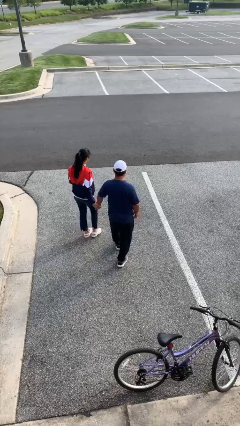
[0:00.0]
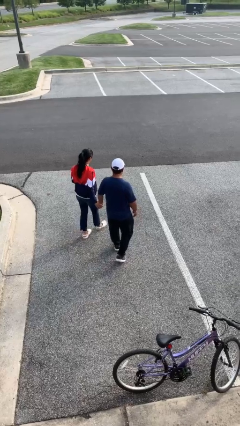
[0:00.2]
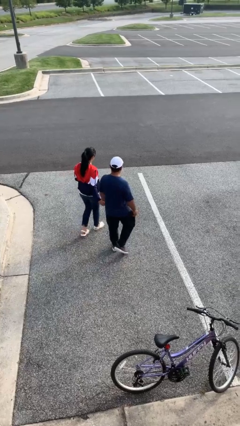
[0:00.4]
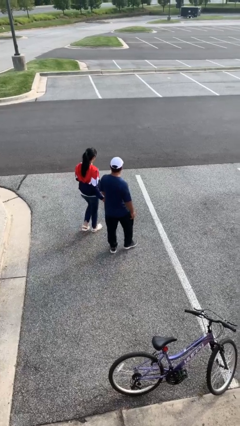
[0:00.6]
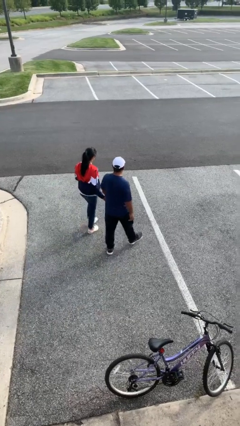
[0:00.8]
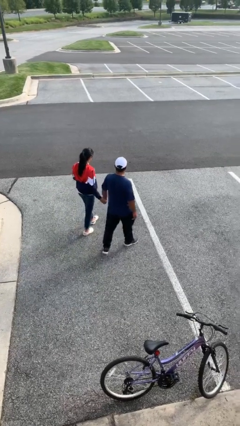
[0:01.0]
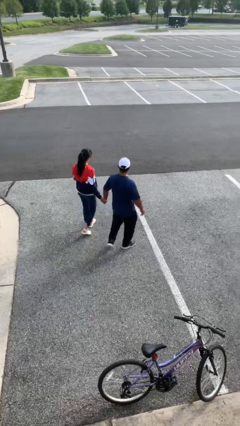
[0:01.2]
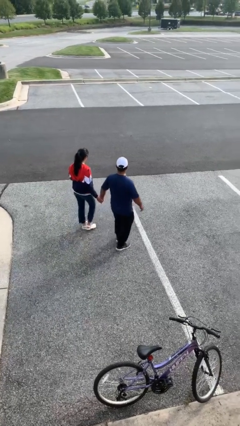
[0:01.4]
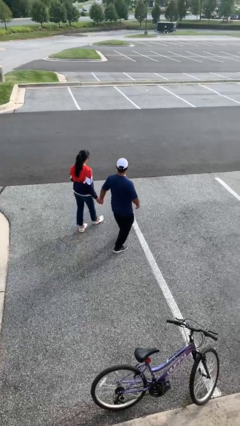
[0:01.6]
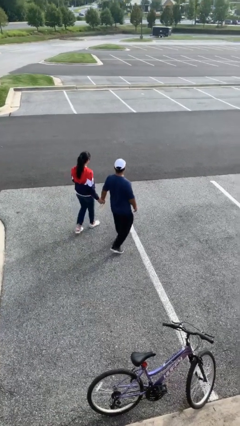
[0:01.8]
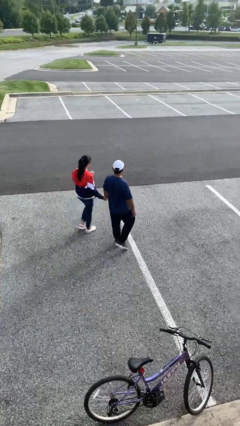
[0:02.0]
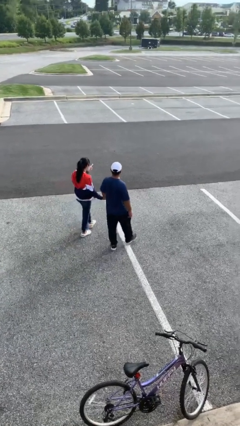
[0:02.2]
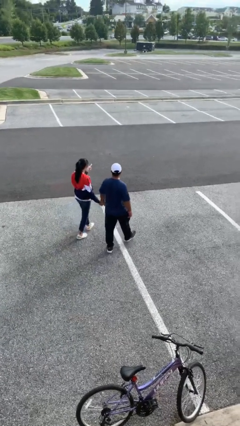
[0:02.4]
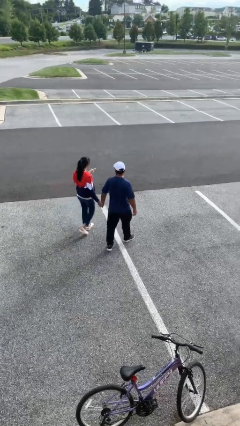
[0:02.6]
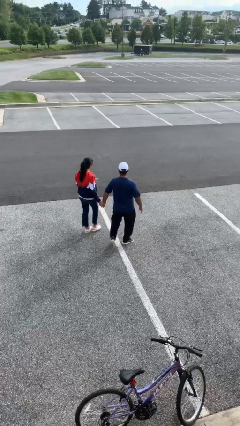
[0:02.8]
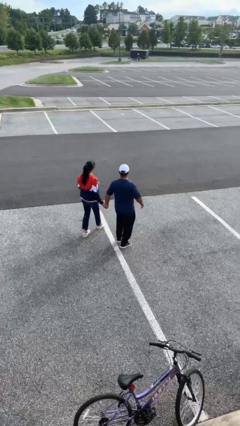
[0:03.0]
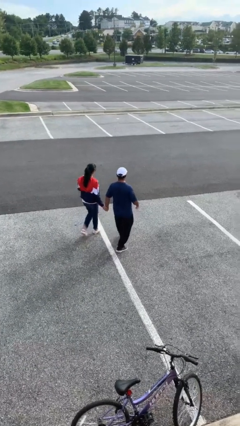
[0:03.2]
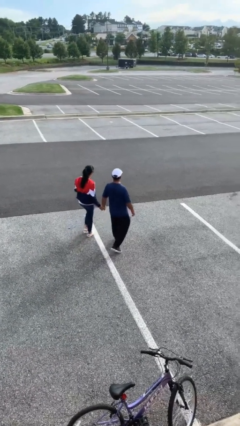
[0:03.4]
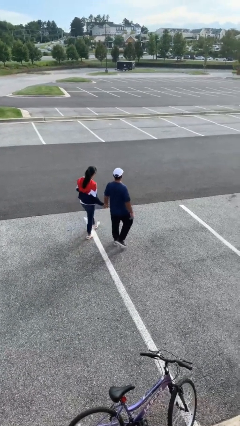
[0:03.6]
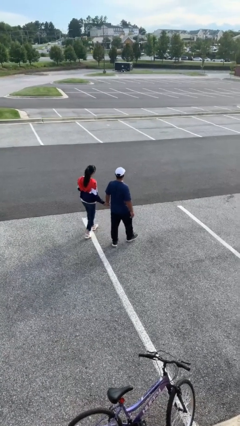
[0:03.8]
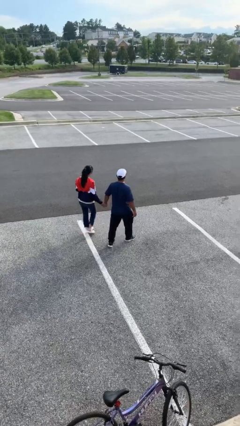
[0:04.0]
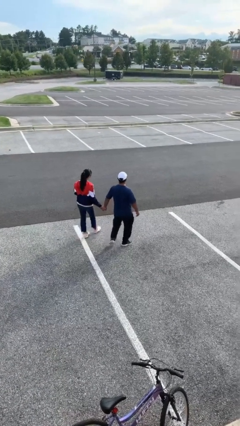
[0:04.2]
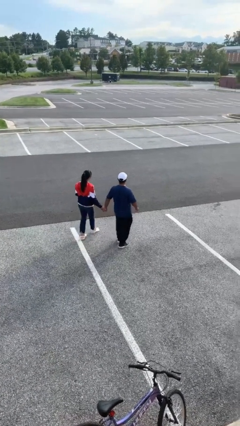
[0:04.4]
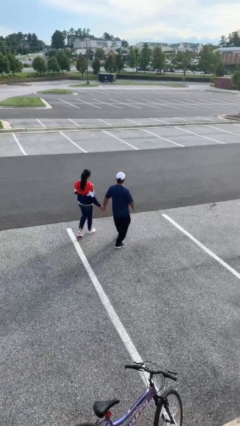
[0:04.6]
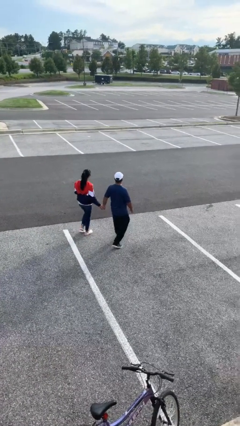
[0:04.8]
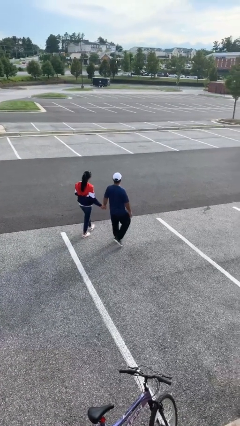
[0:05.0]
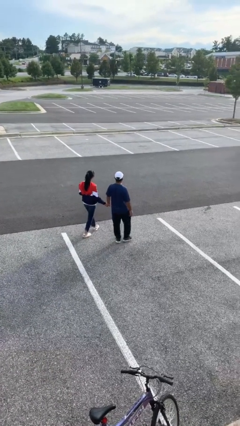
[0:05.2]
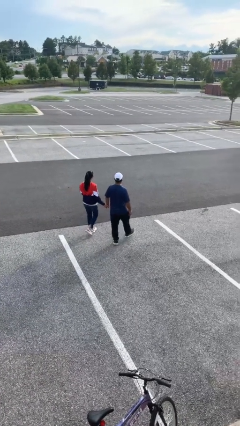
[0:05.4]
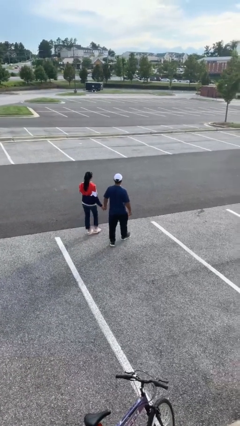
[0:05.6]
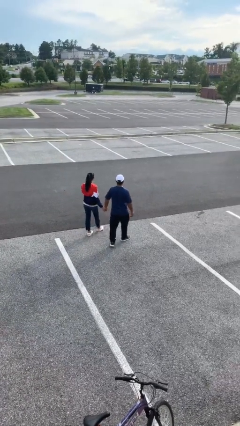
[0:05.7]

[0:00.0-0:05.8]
person holds hand

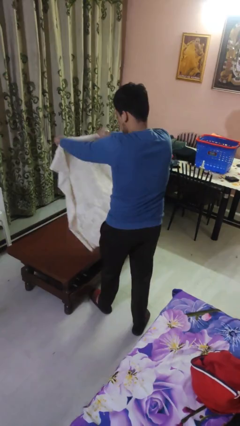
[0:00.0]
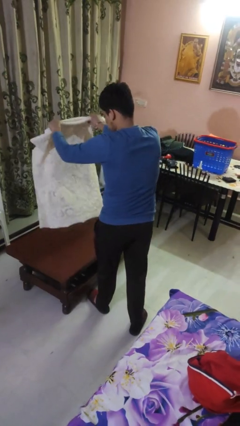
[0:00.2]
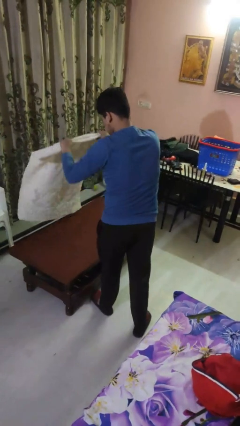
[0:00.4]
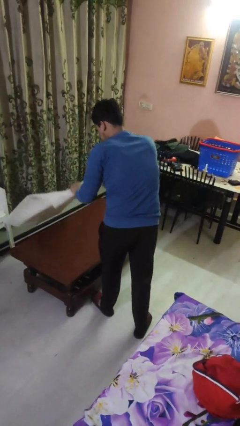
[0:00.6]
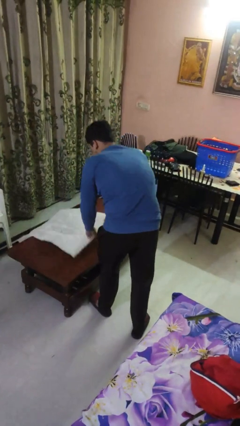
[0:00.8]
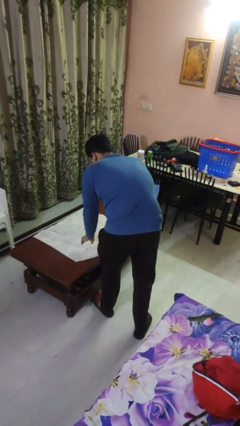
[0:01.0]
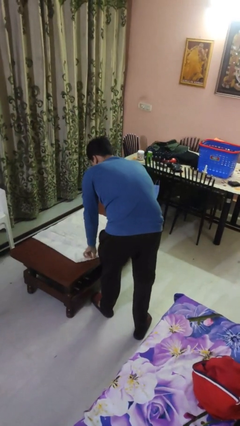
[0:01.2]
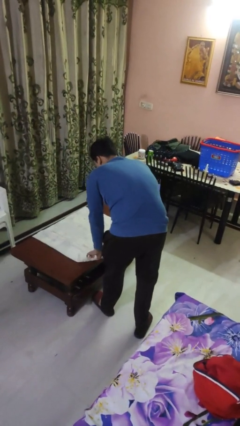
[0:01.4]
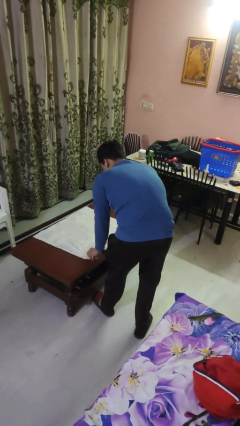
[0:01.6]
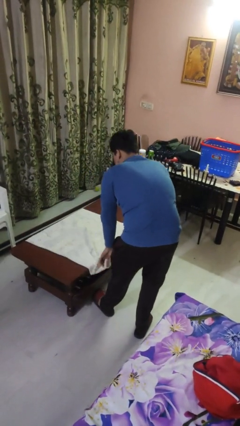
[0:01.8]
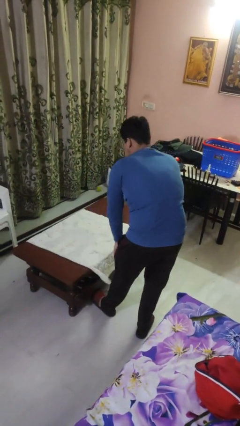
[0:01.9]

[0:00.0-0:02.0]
person spreads tablecloth

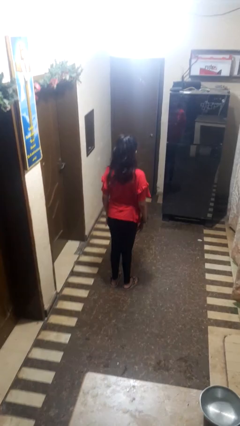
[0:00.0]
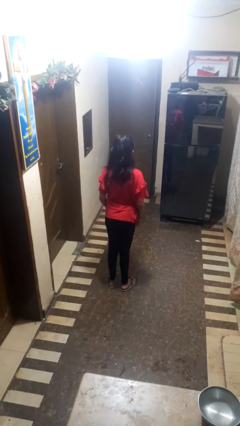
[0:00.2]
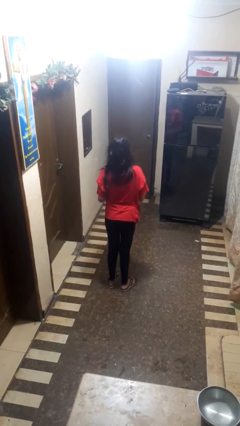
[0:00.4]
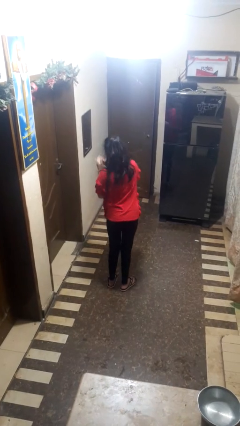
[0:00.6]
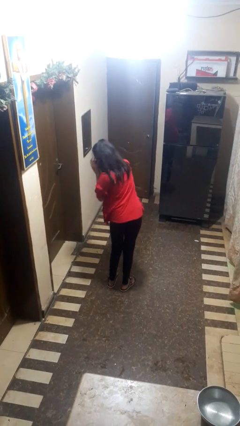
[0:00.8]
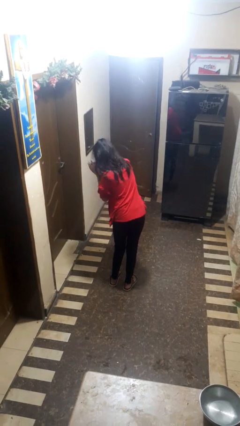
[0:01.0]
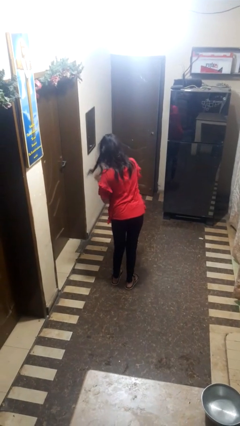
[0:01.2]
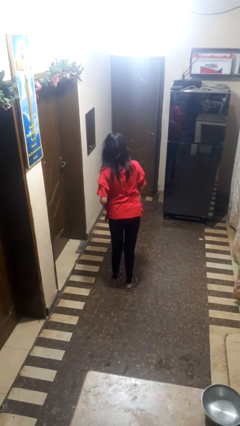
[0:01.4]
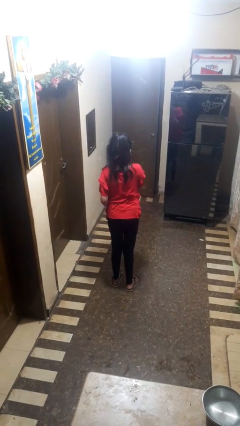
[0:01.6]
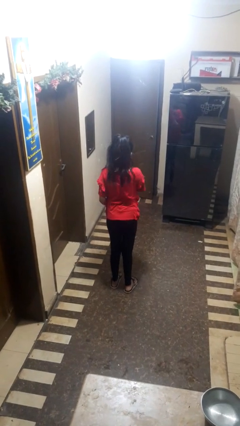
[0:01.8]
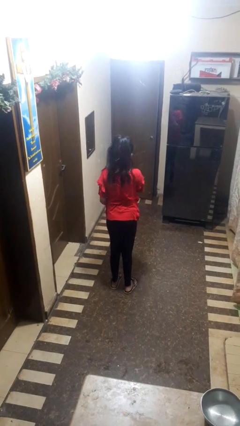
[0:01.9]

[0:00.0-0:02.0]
person sneezes into hand

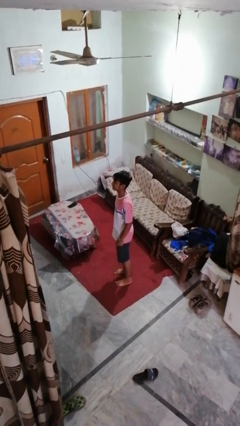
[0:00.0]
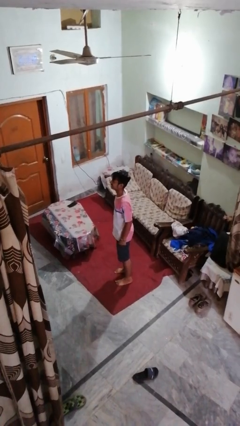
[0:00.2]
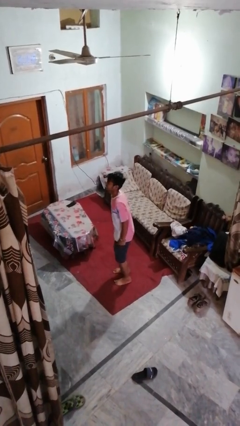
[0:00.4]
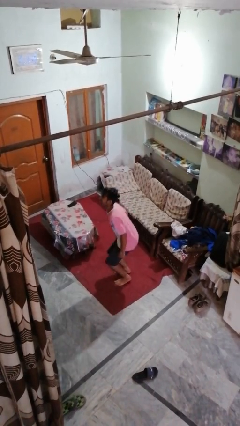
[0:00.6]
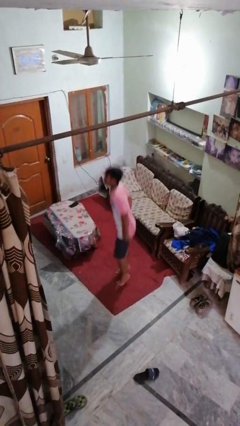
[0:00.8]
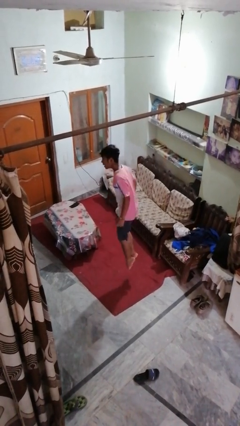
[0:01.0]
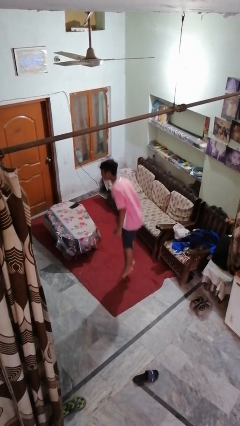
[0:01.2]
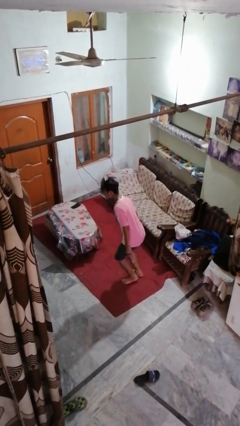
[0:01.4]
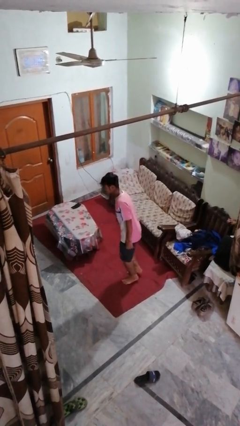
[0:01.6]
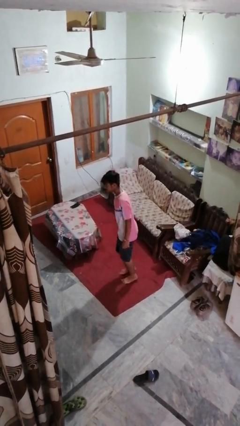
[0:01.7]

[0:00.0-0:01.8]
person jumps

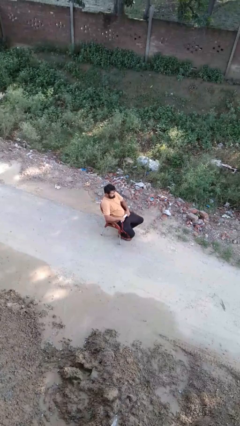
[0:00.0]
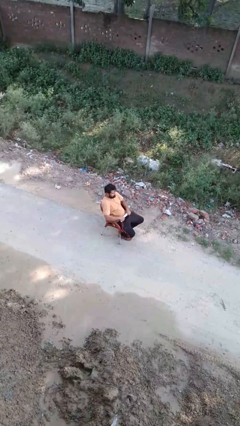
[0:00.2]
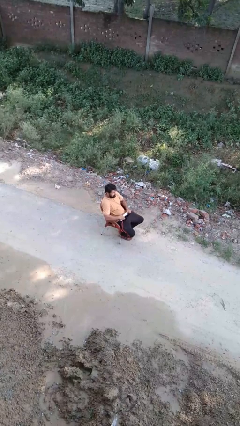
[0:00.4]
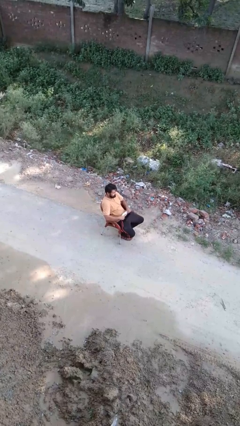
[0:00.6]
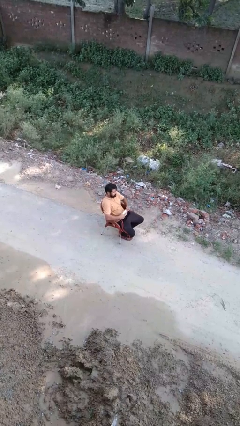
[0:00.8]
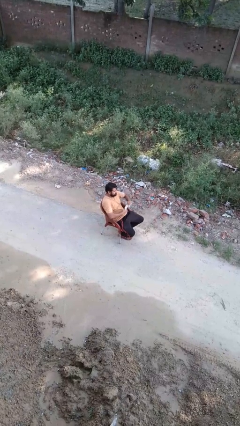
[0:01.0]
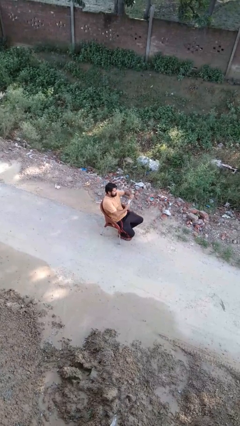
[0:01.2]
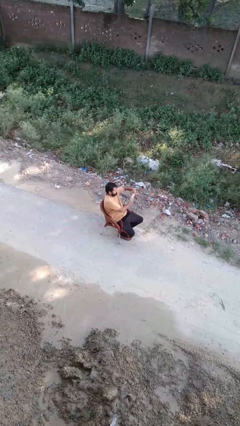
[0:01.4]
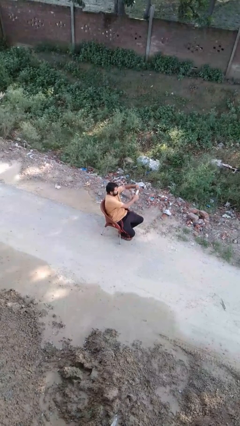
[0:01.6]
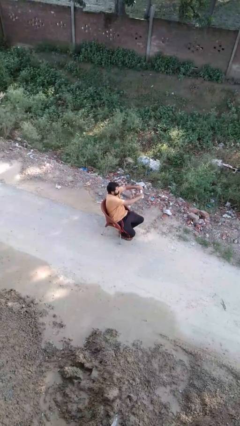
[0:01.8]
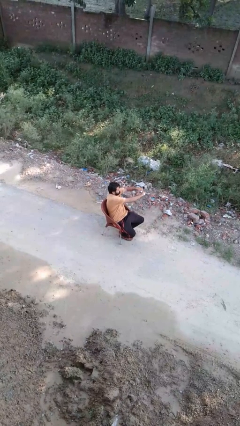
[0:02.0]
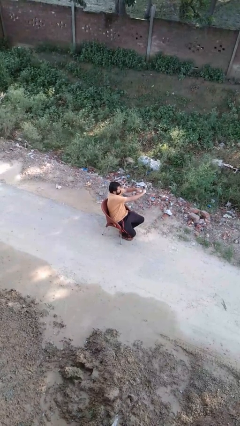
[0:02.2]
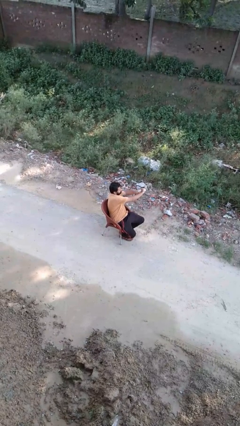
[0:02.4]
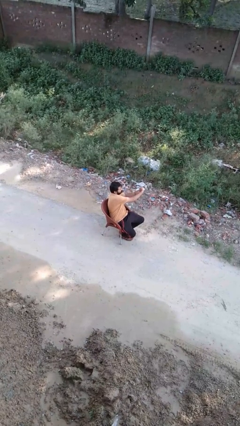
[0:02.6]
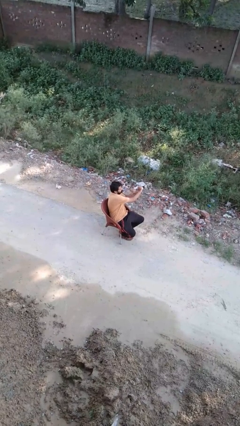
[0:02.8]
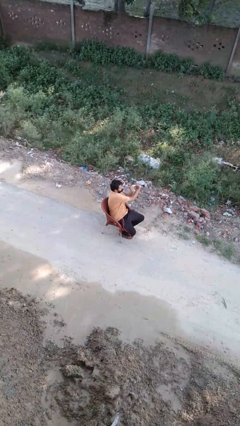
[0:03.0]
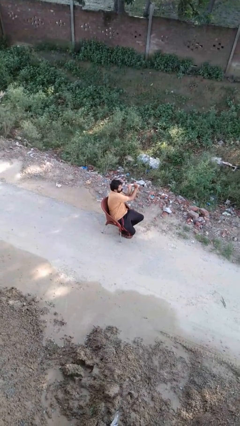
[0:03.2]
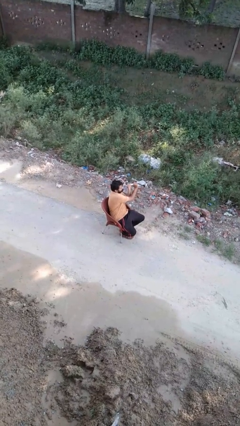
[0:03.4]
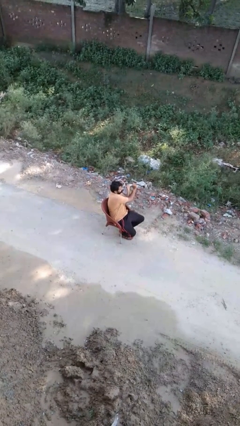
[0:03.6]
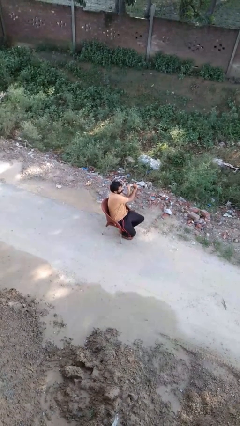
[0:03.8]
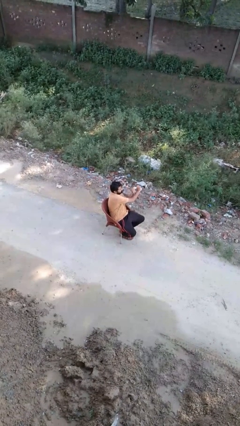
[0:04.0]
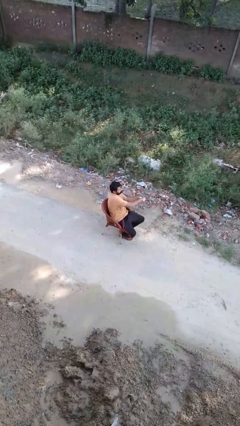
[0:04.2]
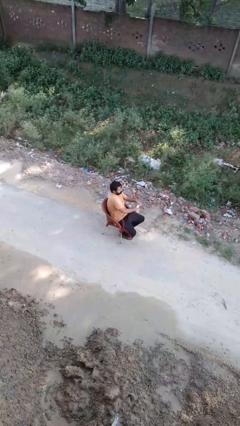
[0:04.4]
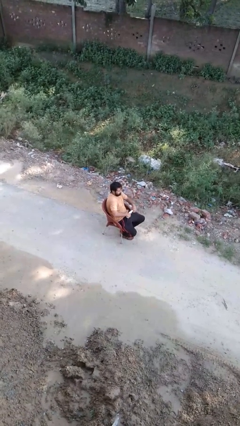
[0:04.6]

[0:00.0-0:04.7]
person squeezes object

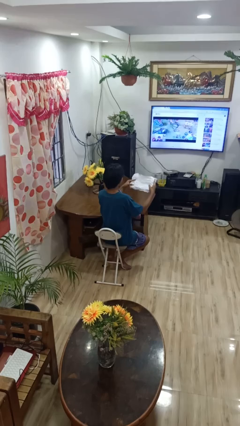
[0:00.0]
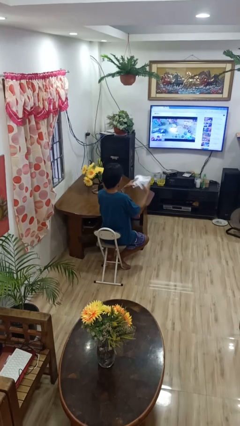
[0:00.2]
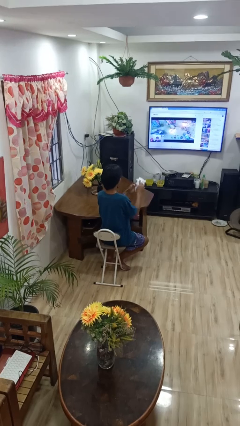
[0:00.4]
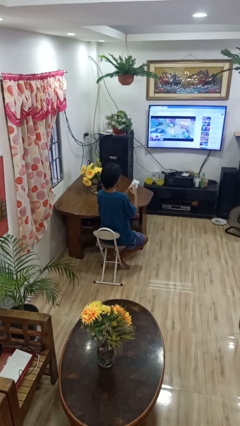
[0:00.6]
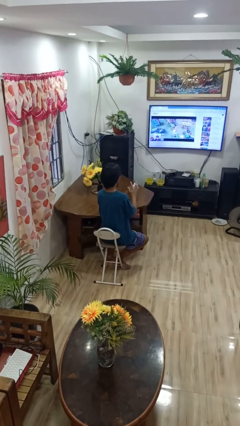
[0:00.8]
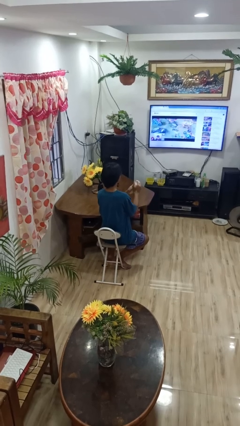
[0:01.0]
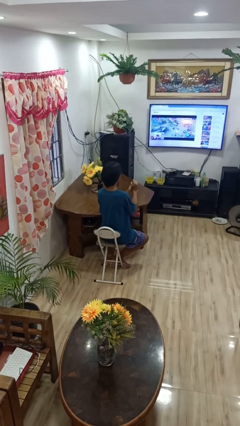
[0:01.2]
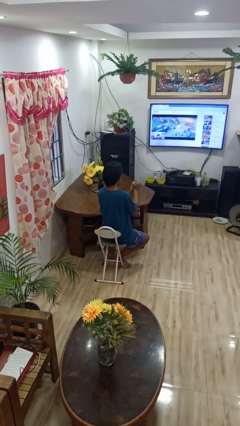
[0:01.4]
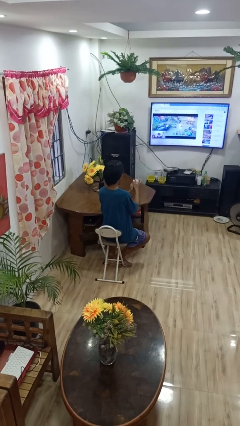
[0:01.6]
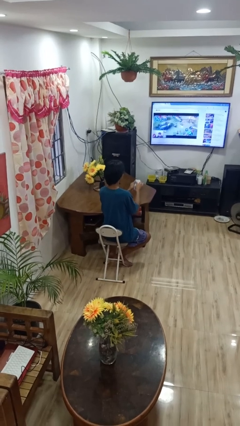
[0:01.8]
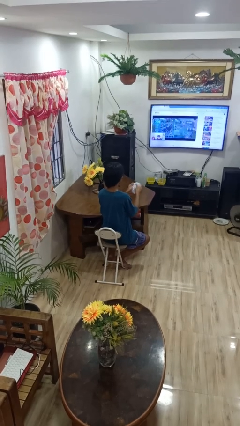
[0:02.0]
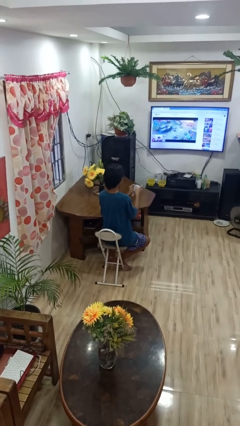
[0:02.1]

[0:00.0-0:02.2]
person crumples paper
